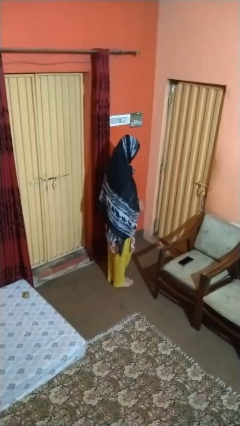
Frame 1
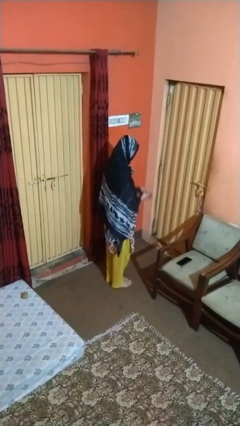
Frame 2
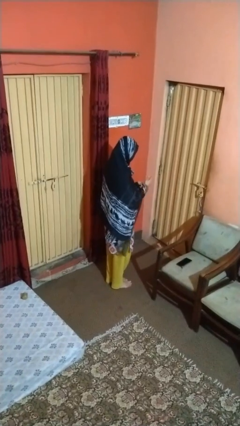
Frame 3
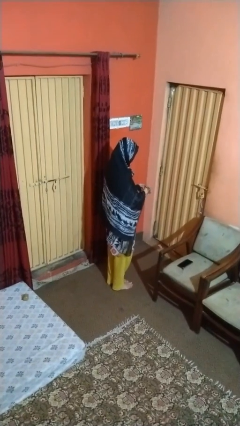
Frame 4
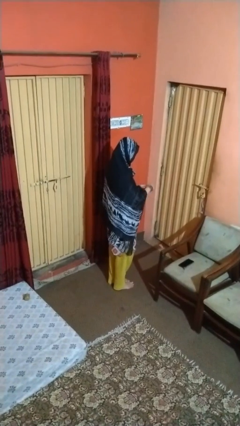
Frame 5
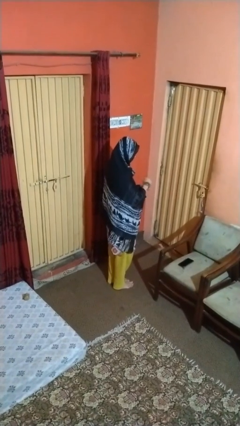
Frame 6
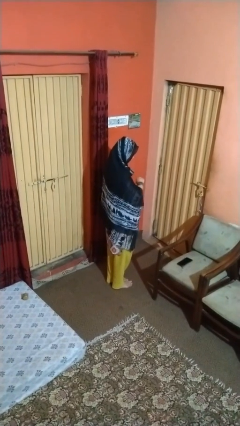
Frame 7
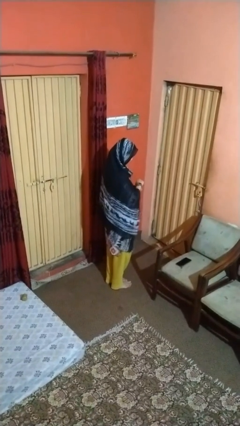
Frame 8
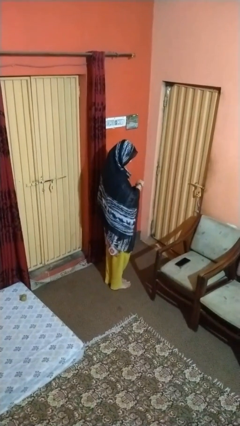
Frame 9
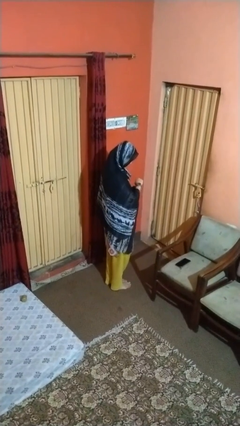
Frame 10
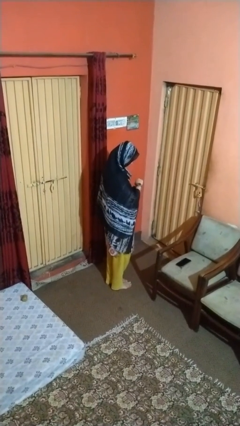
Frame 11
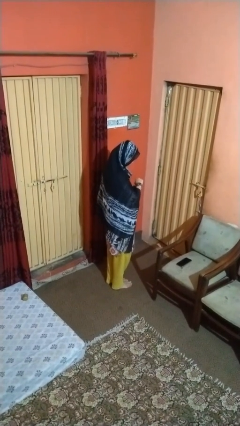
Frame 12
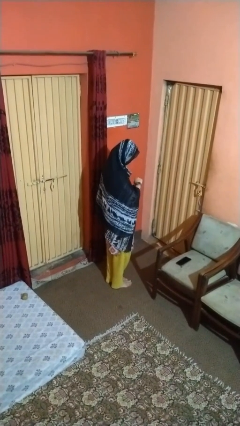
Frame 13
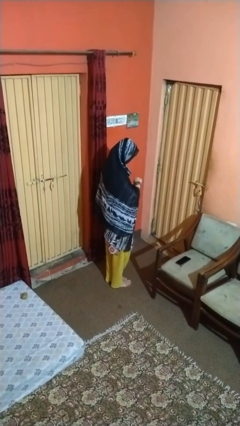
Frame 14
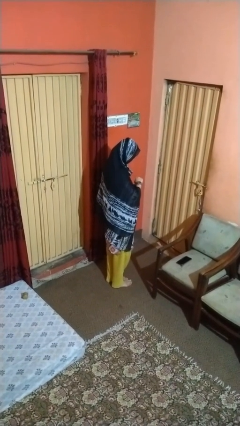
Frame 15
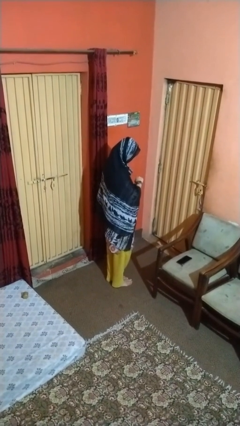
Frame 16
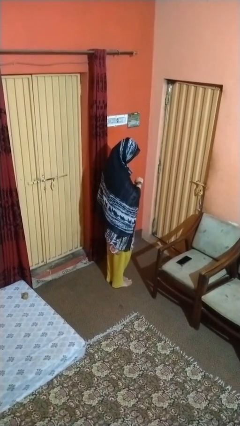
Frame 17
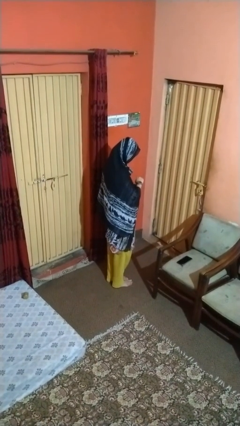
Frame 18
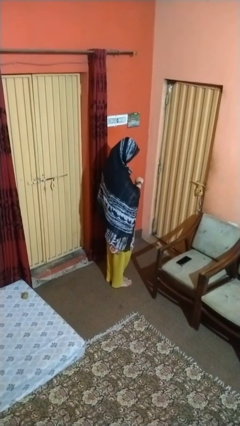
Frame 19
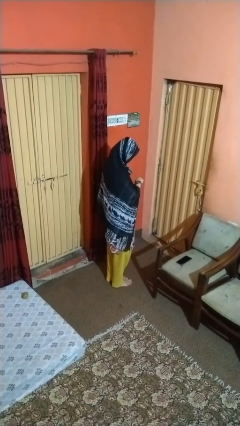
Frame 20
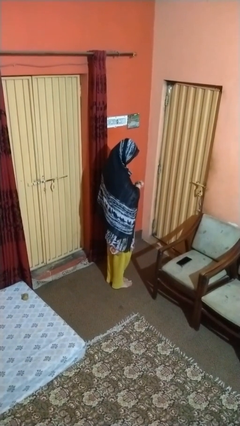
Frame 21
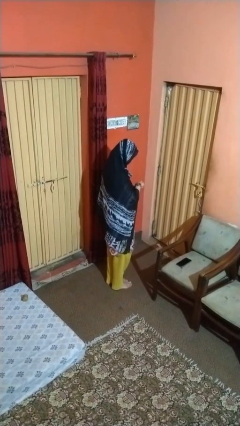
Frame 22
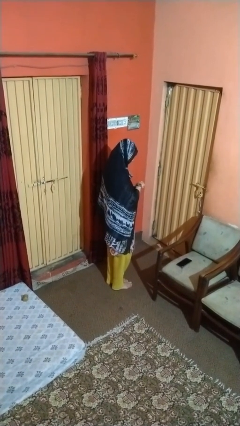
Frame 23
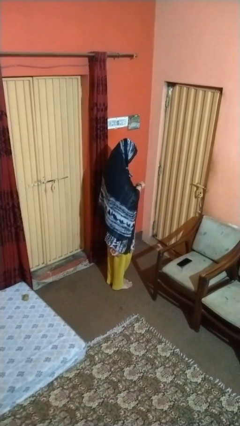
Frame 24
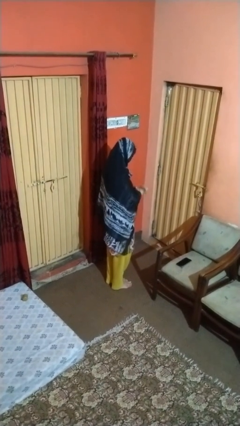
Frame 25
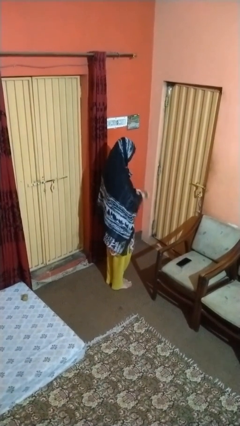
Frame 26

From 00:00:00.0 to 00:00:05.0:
person puts on wristwatch

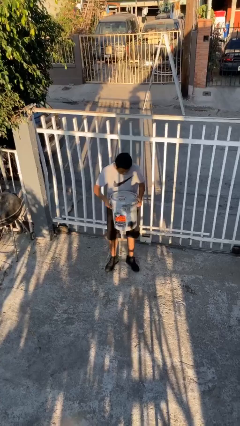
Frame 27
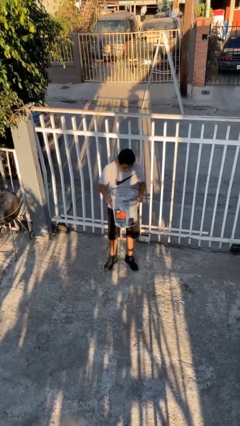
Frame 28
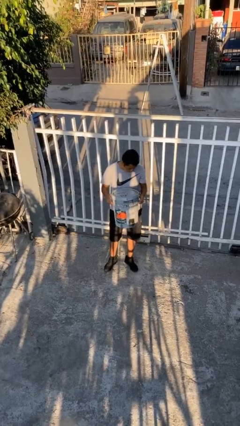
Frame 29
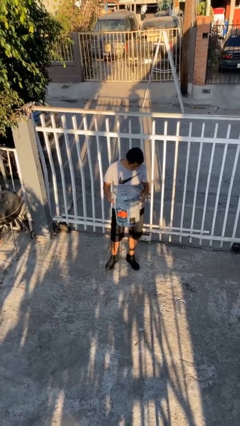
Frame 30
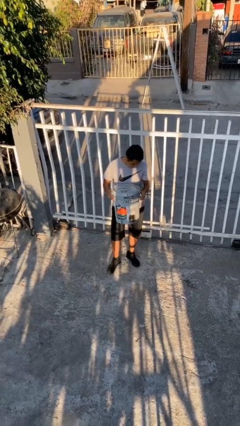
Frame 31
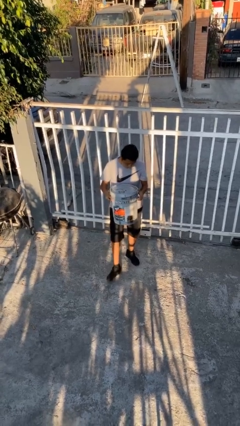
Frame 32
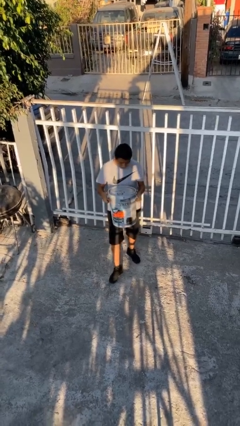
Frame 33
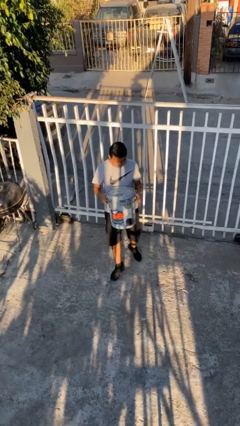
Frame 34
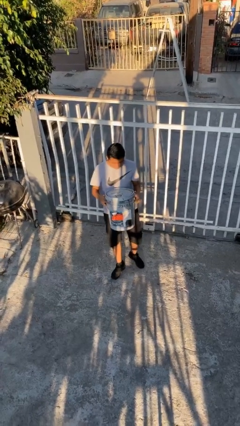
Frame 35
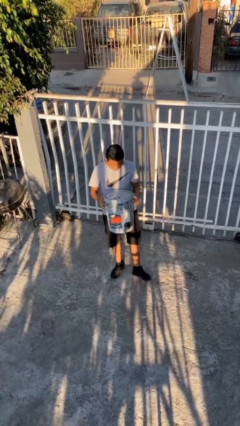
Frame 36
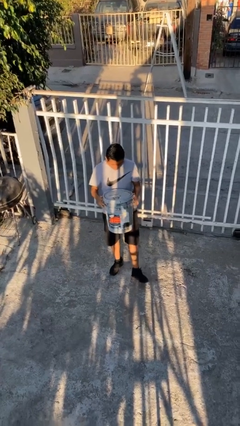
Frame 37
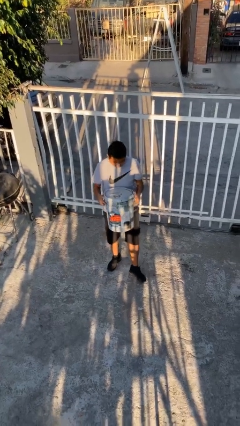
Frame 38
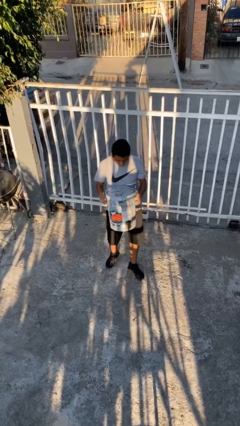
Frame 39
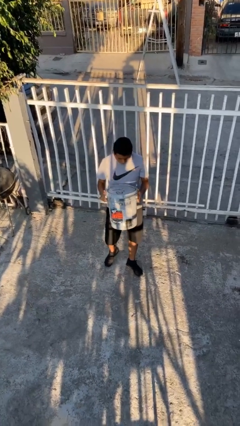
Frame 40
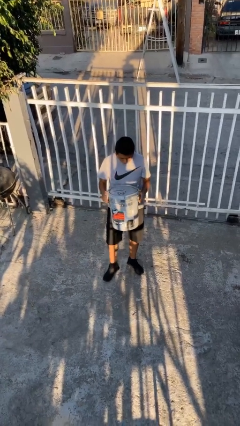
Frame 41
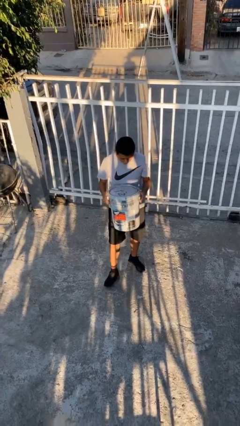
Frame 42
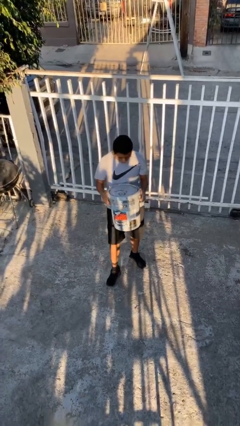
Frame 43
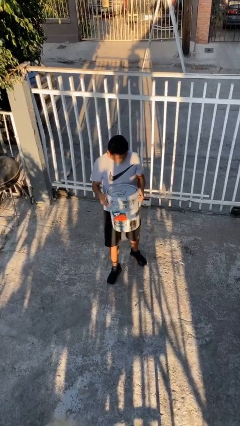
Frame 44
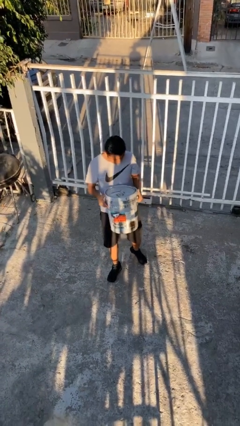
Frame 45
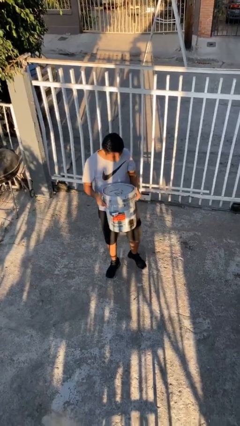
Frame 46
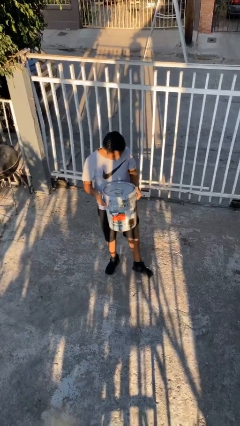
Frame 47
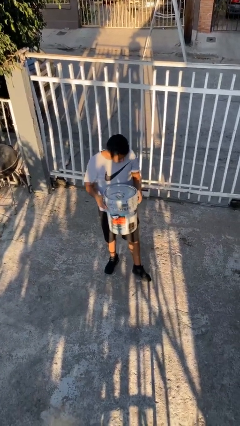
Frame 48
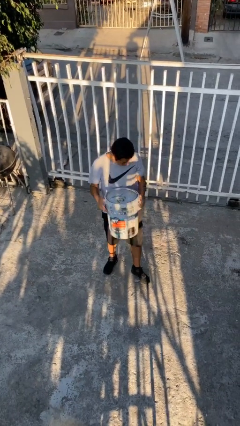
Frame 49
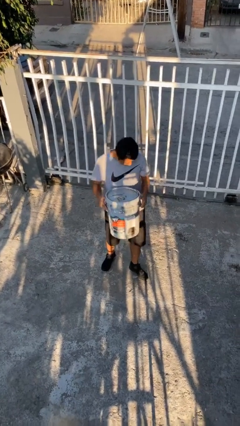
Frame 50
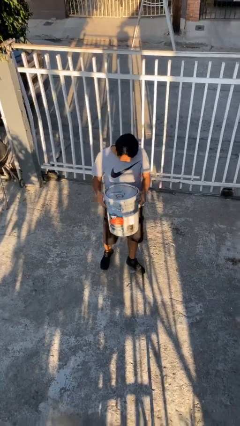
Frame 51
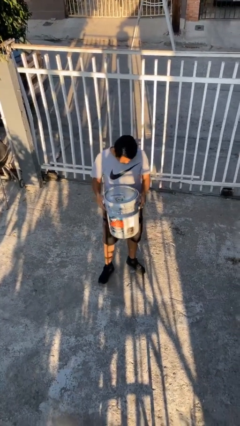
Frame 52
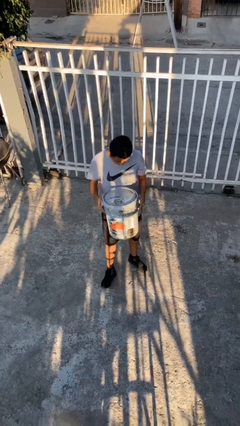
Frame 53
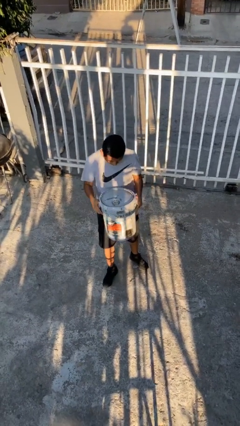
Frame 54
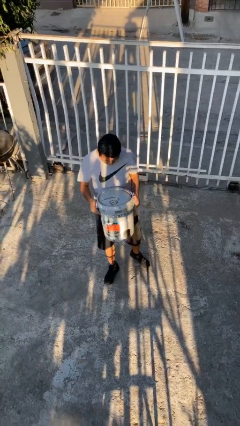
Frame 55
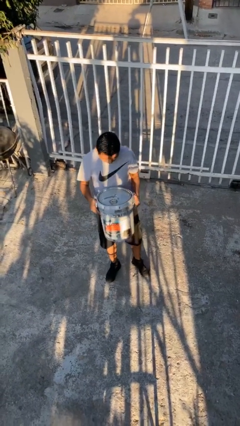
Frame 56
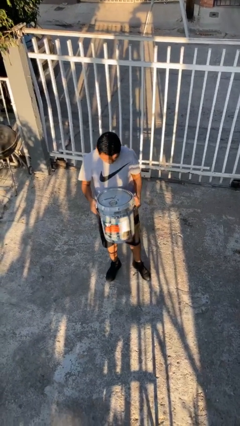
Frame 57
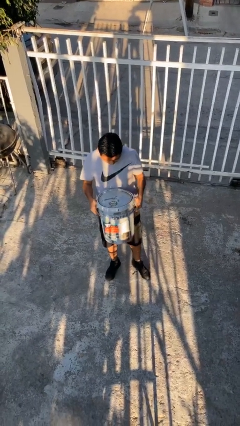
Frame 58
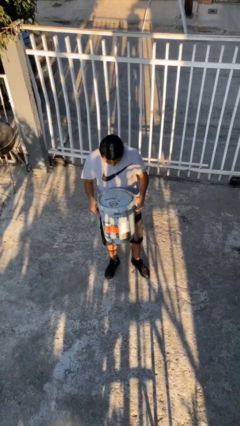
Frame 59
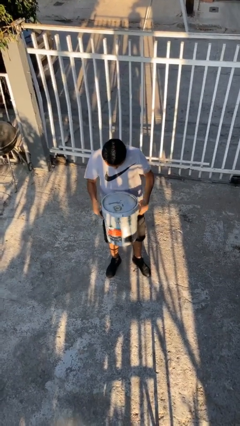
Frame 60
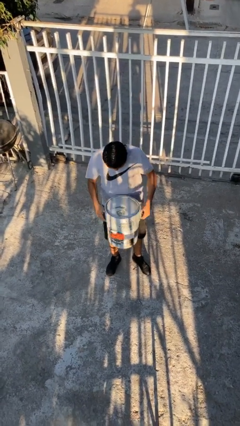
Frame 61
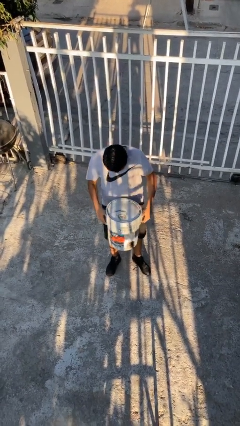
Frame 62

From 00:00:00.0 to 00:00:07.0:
person carries heavy object

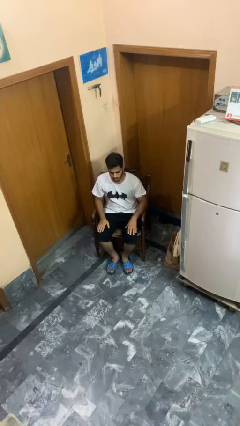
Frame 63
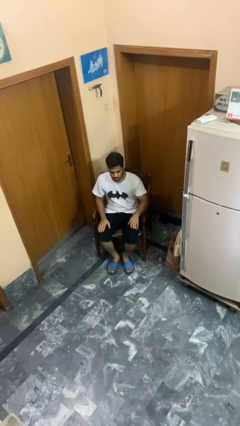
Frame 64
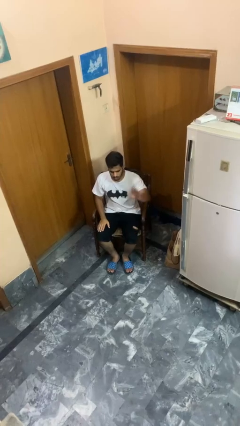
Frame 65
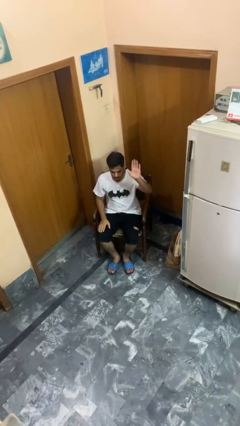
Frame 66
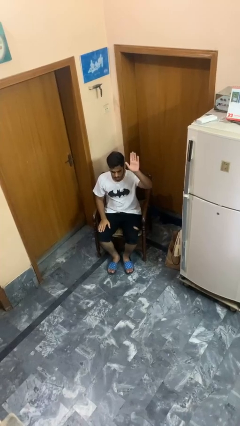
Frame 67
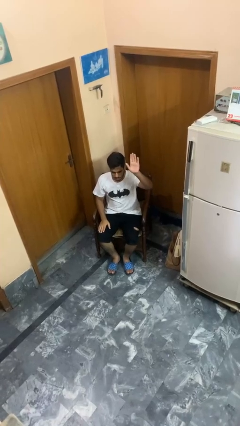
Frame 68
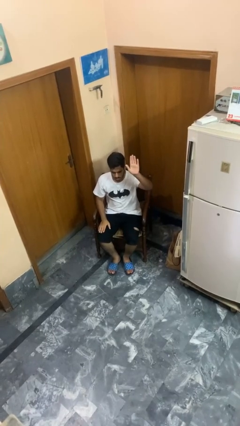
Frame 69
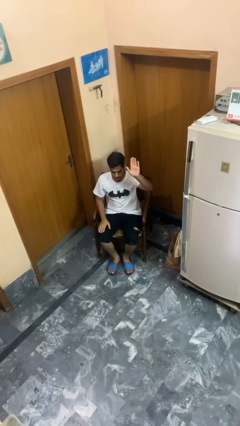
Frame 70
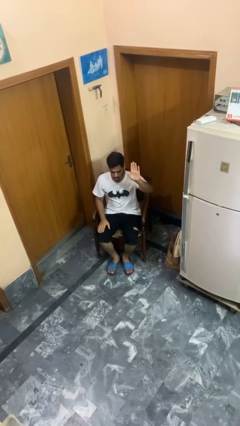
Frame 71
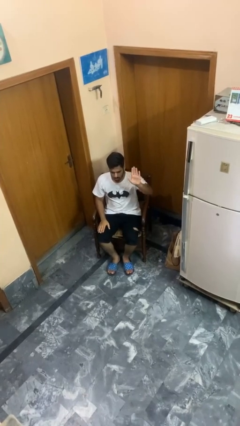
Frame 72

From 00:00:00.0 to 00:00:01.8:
person gestures raise hand

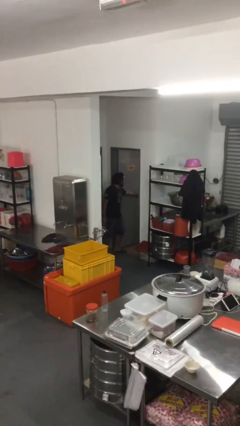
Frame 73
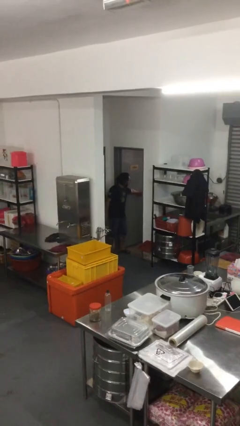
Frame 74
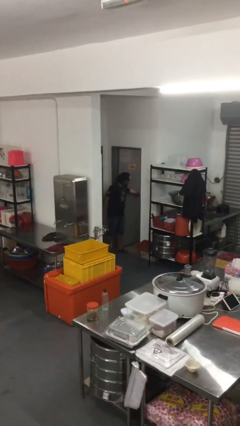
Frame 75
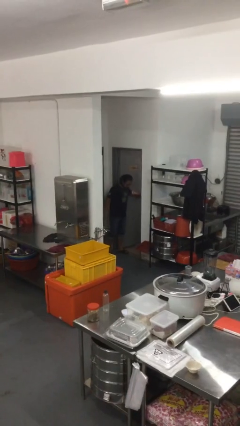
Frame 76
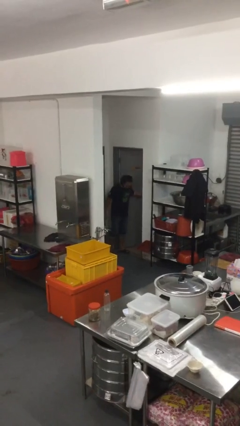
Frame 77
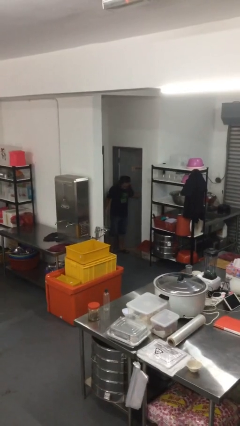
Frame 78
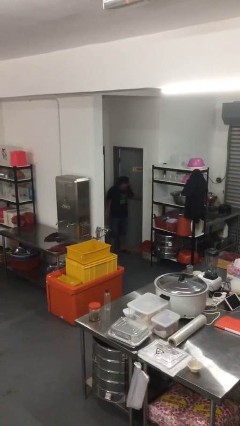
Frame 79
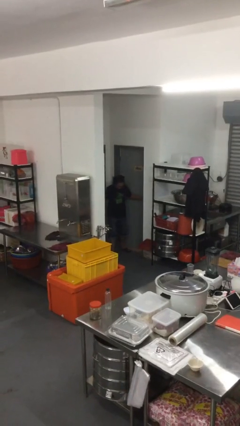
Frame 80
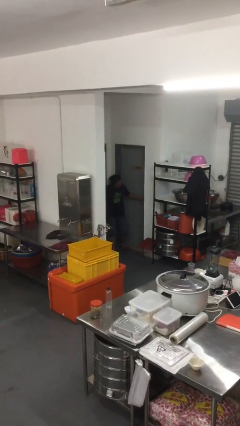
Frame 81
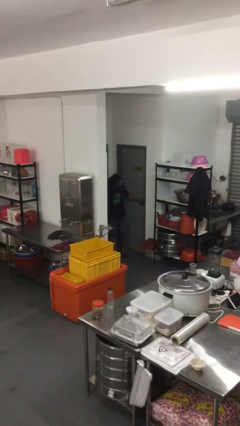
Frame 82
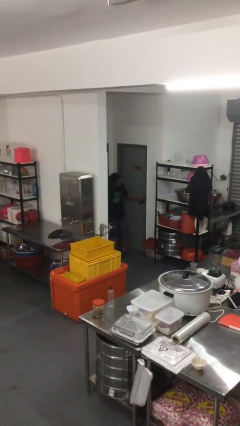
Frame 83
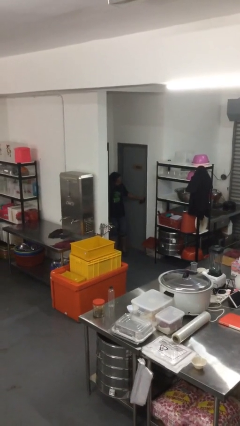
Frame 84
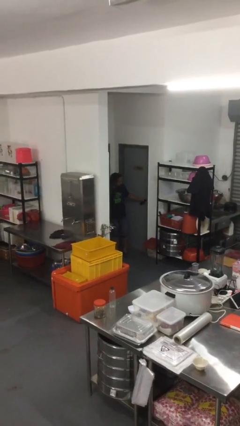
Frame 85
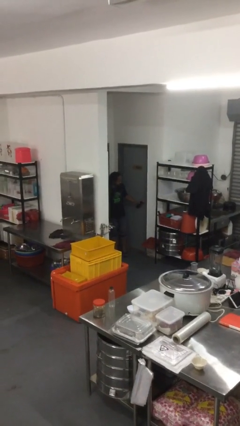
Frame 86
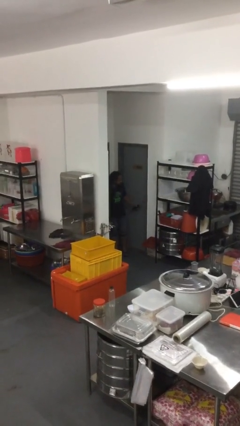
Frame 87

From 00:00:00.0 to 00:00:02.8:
person closes facility door

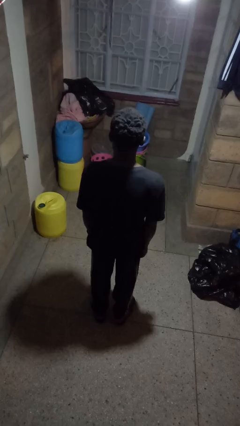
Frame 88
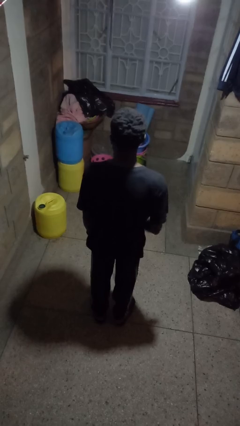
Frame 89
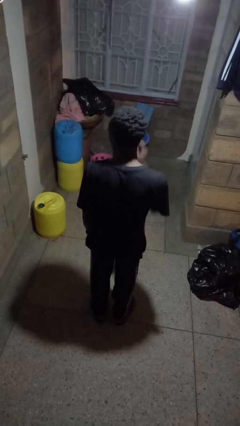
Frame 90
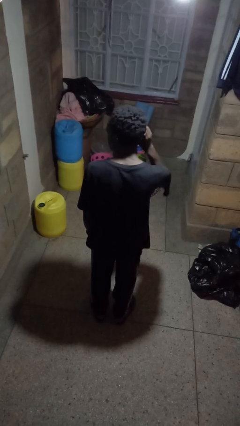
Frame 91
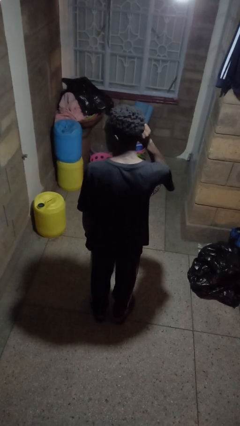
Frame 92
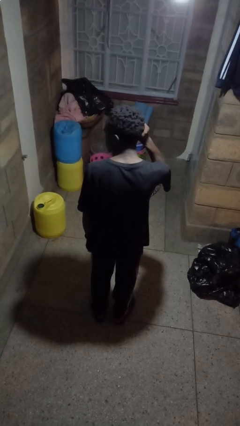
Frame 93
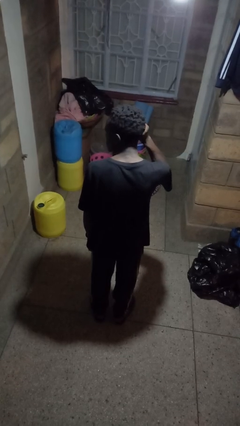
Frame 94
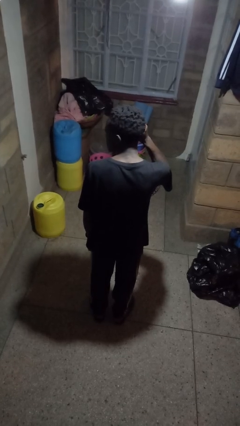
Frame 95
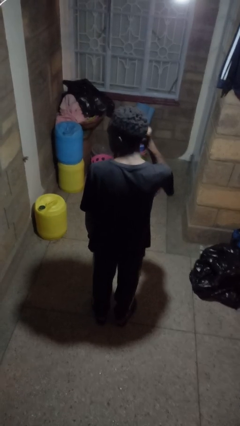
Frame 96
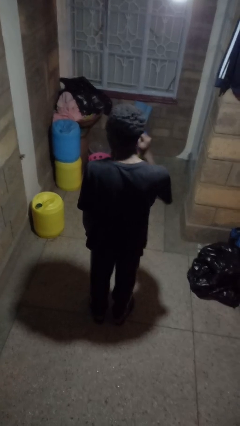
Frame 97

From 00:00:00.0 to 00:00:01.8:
person touches earlobe
